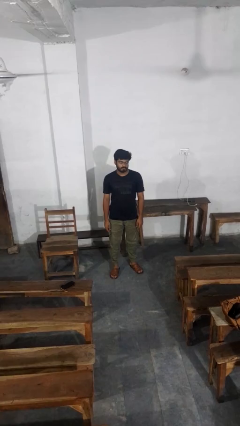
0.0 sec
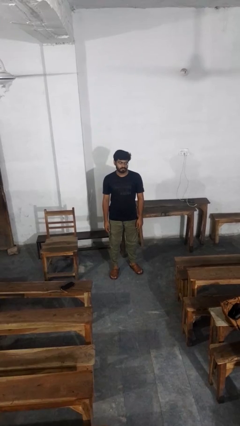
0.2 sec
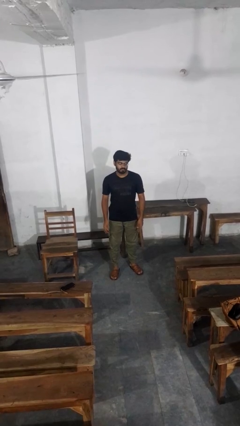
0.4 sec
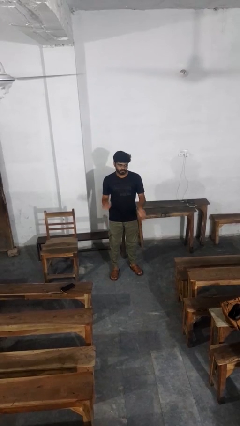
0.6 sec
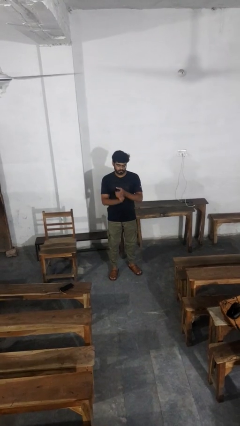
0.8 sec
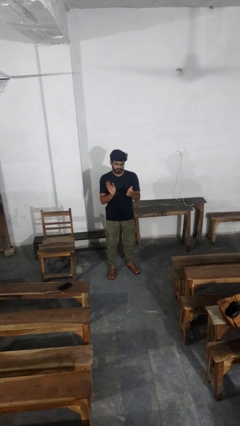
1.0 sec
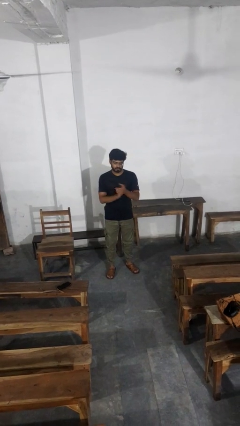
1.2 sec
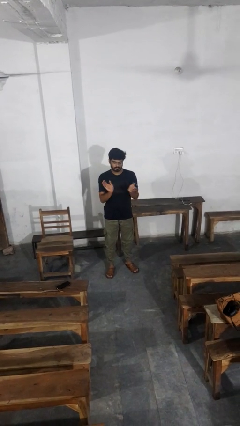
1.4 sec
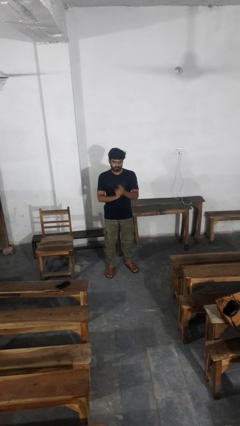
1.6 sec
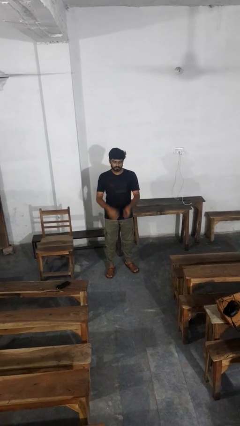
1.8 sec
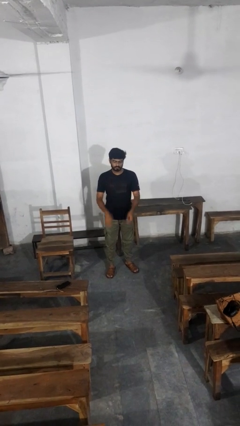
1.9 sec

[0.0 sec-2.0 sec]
person claps hands

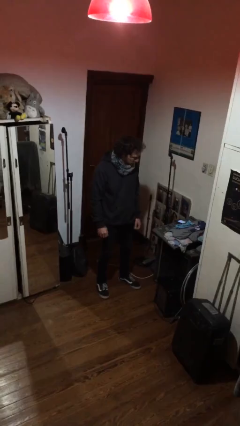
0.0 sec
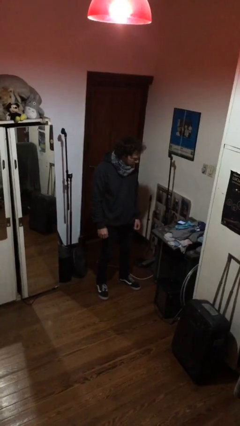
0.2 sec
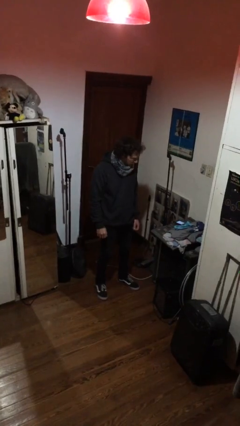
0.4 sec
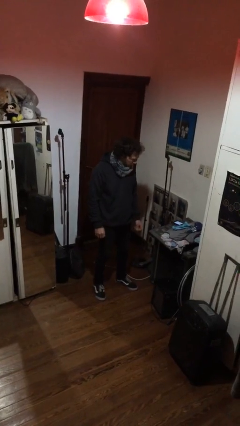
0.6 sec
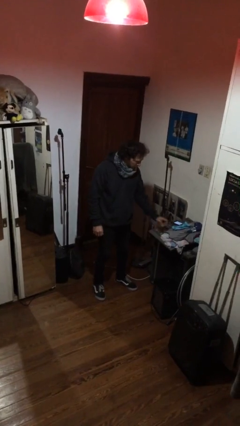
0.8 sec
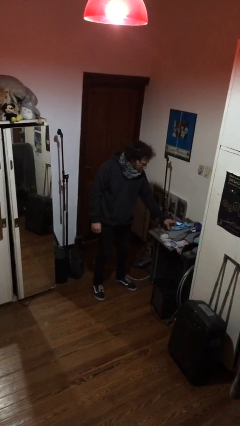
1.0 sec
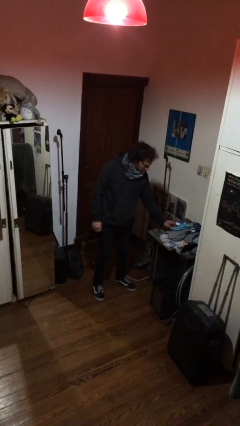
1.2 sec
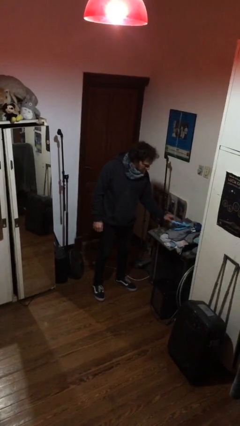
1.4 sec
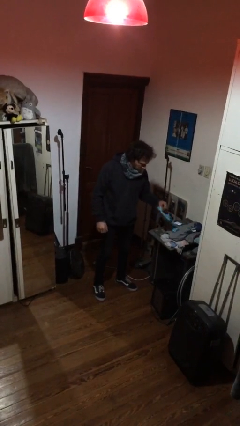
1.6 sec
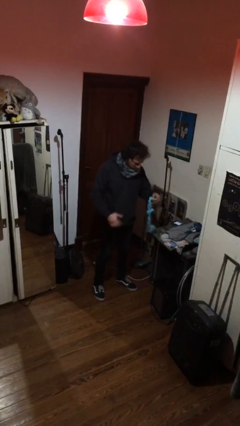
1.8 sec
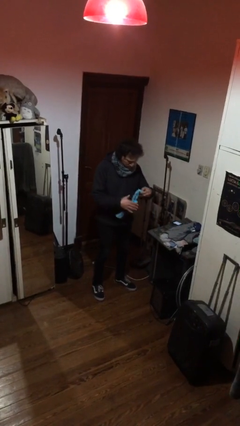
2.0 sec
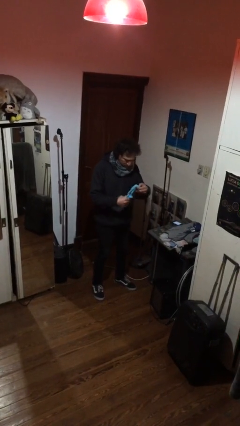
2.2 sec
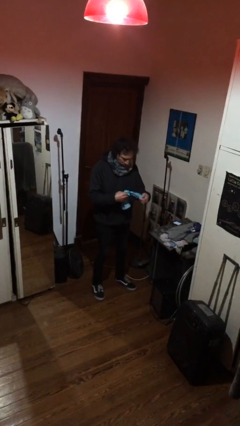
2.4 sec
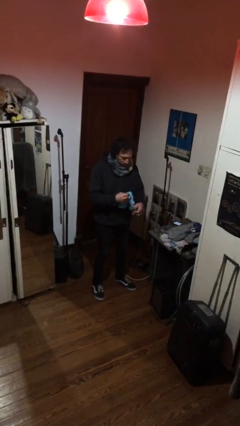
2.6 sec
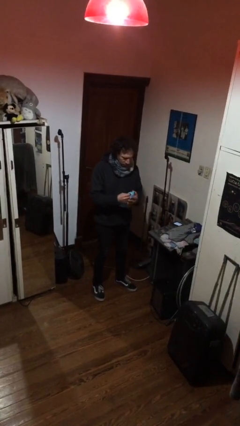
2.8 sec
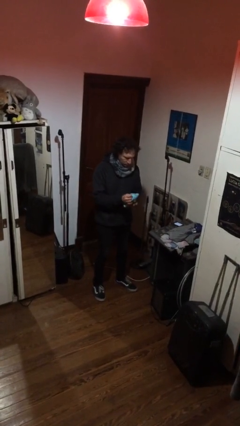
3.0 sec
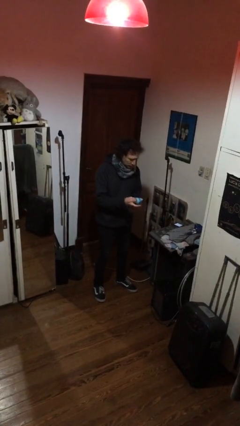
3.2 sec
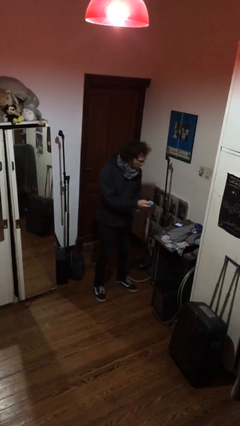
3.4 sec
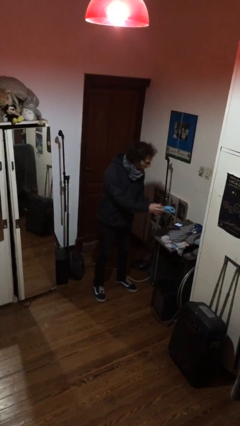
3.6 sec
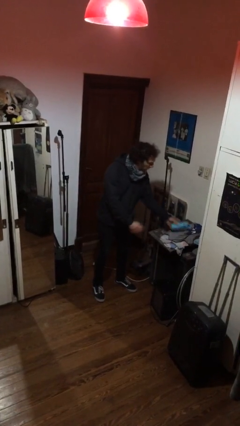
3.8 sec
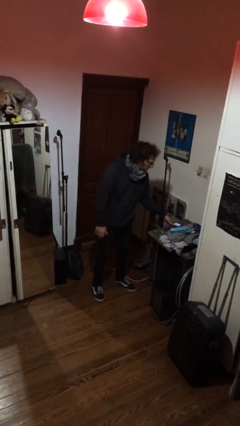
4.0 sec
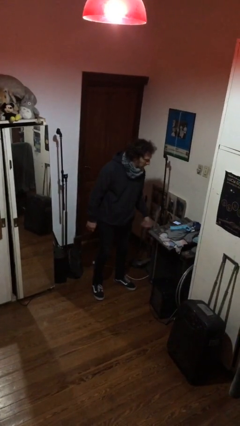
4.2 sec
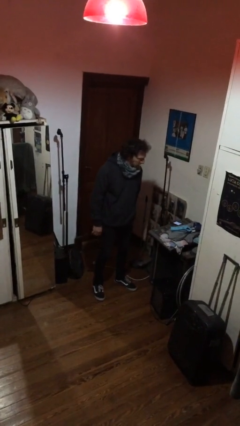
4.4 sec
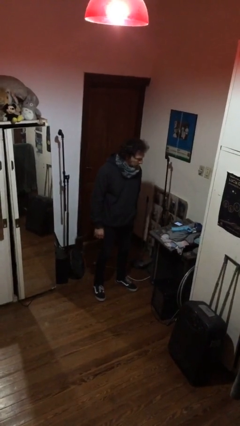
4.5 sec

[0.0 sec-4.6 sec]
person folds socks

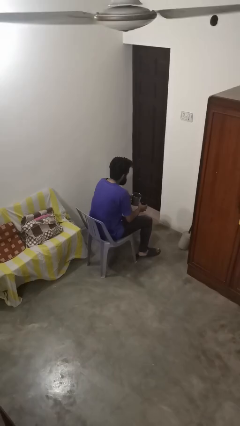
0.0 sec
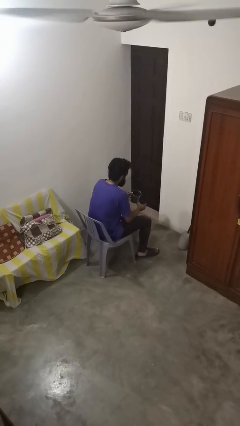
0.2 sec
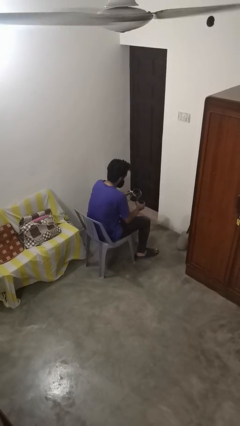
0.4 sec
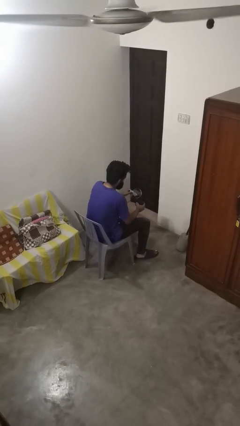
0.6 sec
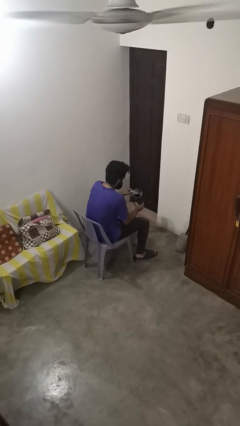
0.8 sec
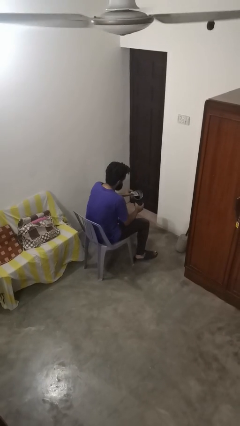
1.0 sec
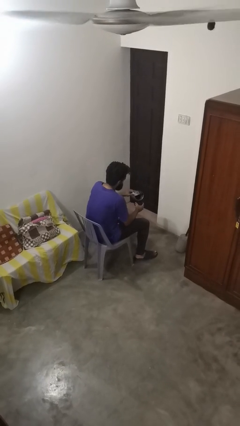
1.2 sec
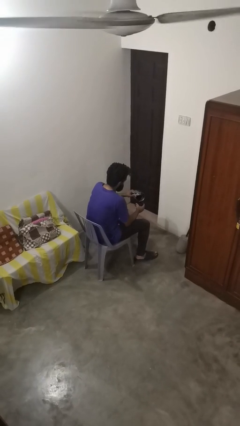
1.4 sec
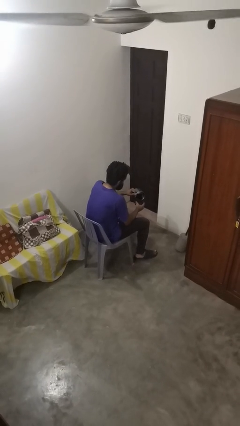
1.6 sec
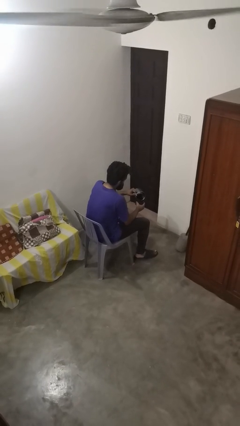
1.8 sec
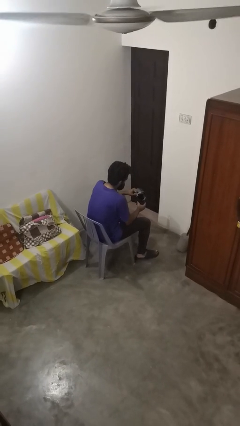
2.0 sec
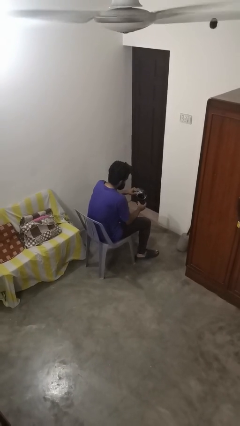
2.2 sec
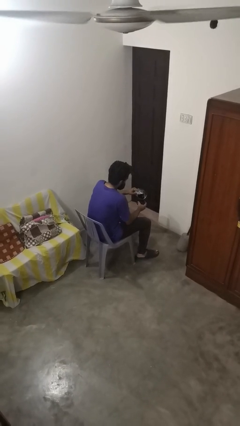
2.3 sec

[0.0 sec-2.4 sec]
person pours coffee into mug

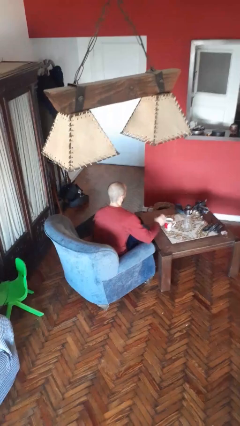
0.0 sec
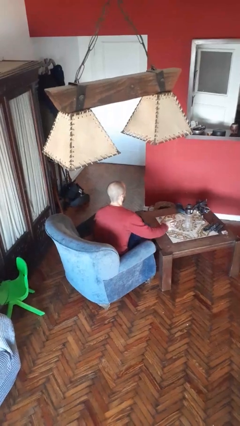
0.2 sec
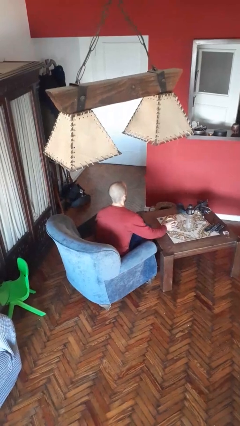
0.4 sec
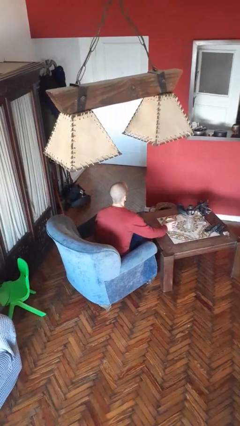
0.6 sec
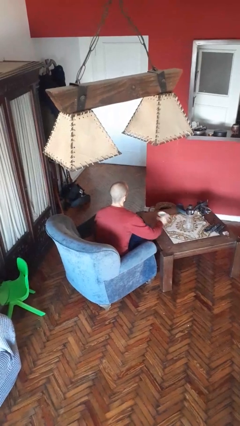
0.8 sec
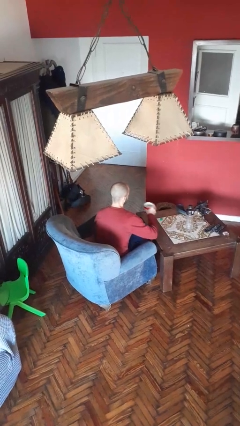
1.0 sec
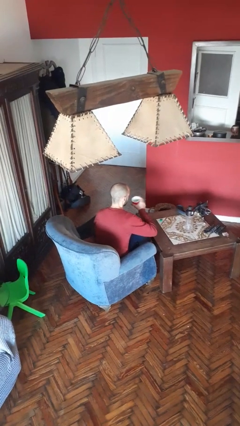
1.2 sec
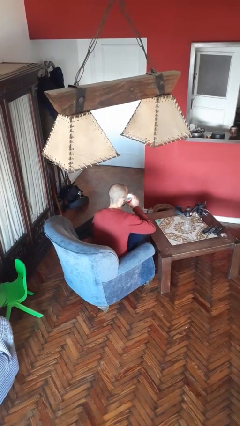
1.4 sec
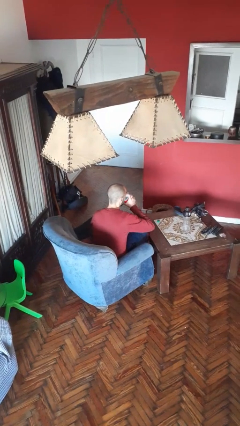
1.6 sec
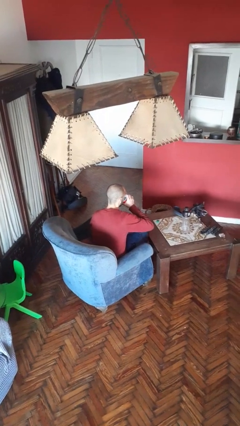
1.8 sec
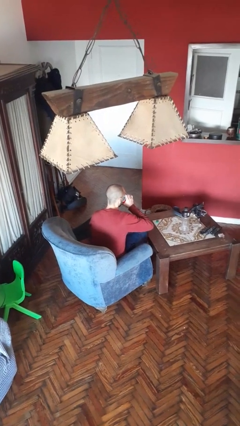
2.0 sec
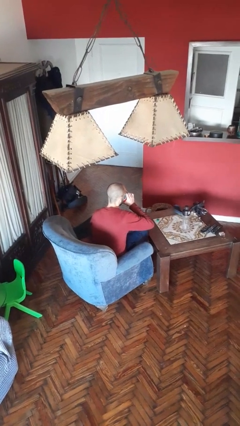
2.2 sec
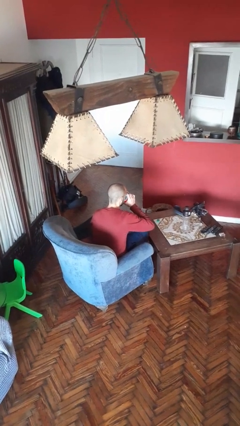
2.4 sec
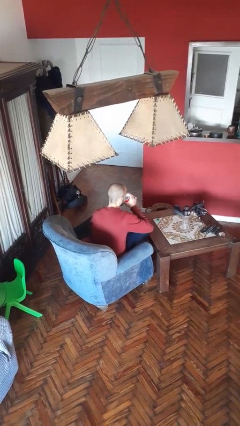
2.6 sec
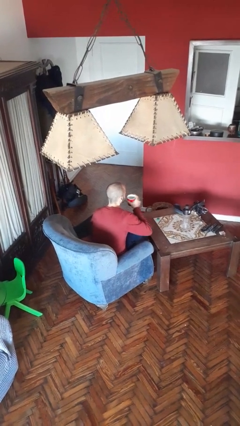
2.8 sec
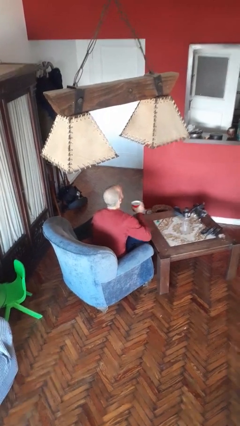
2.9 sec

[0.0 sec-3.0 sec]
person drinks from cup

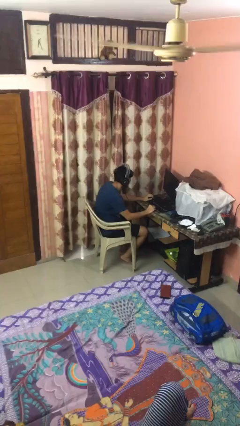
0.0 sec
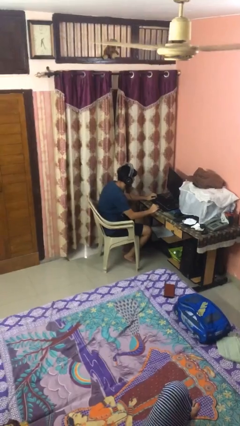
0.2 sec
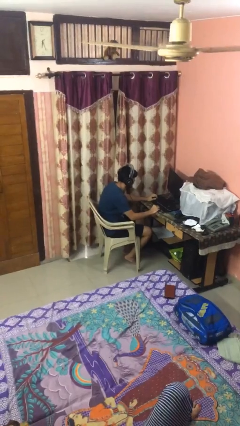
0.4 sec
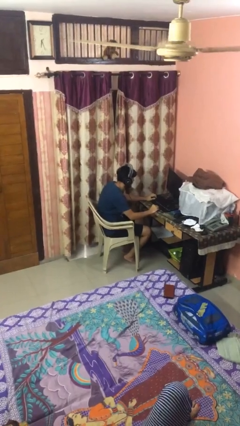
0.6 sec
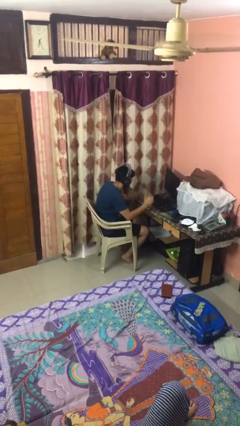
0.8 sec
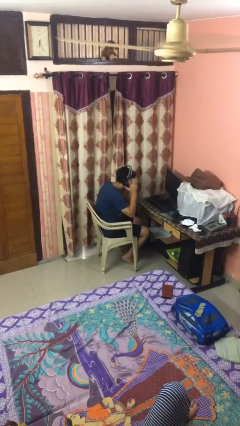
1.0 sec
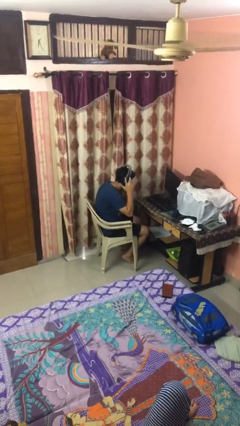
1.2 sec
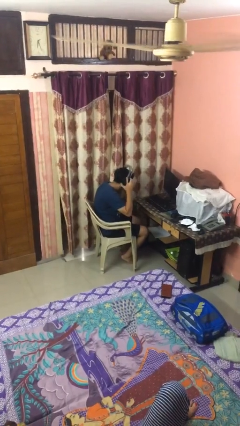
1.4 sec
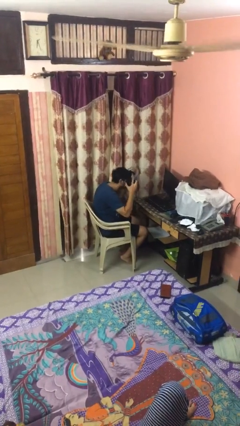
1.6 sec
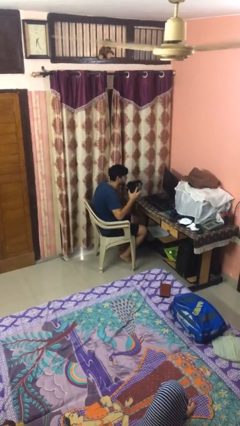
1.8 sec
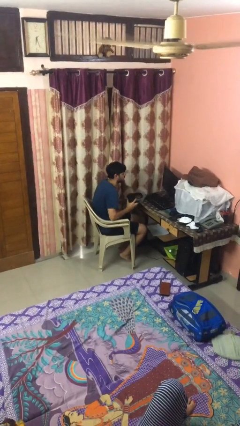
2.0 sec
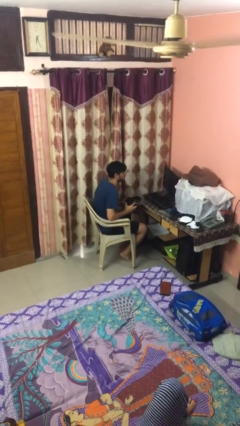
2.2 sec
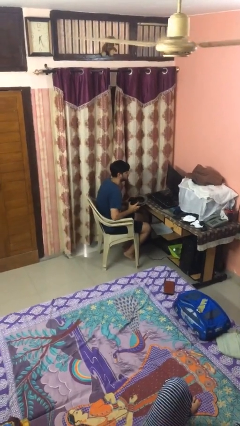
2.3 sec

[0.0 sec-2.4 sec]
person takes off headphones

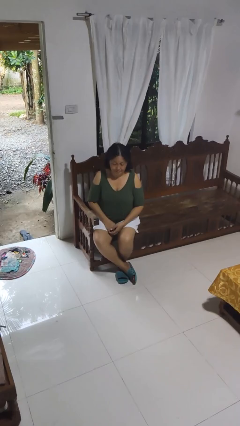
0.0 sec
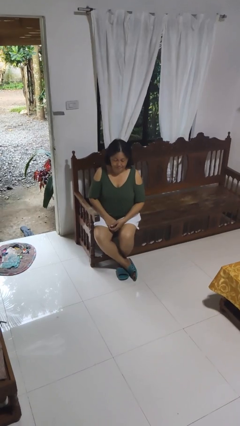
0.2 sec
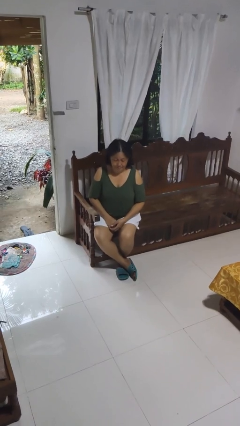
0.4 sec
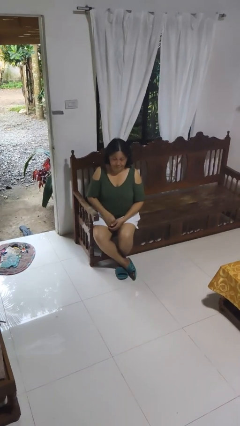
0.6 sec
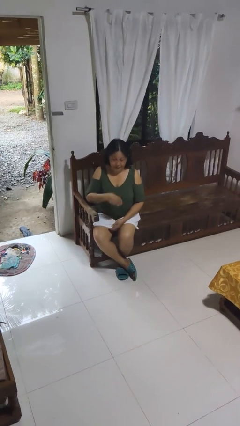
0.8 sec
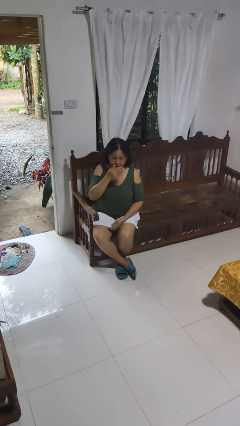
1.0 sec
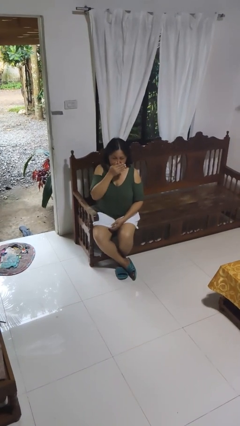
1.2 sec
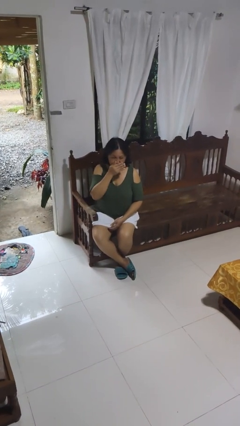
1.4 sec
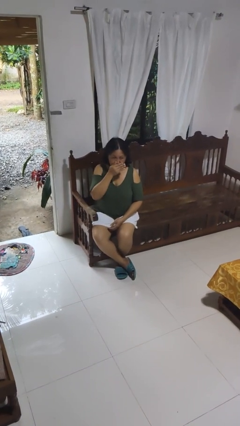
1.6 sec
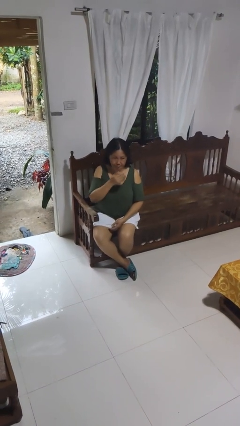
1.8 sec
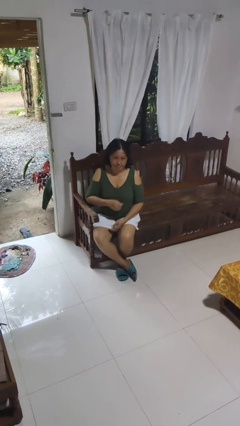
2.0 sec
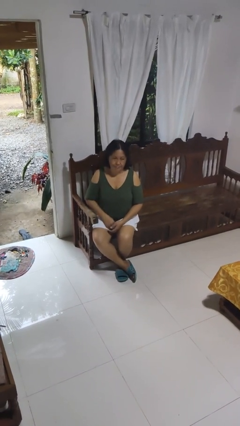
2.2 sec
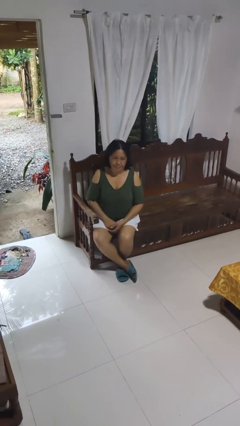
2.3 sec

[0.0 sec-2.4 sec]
person sneezes into hand

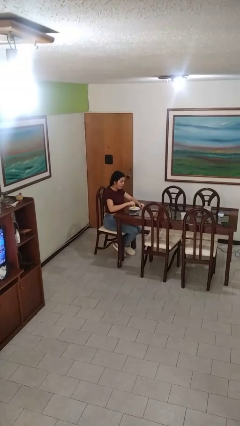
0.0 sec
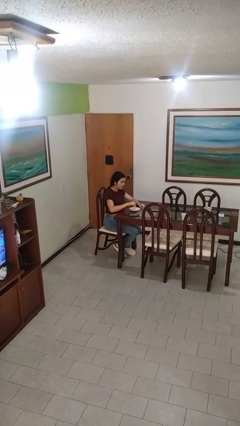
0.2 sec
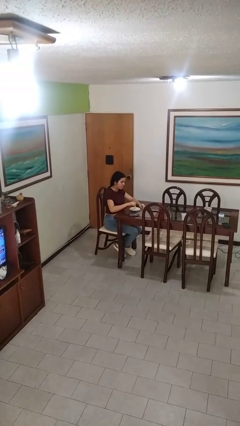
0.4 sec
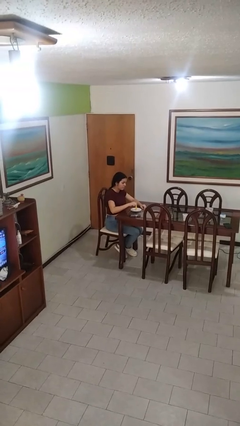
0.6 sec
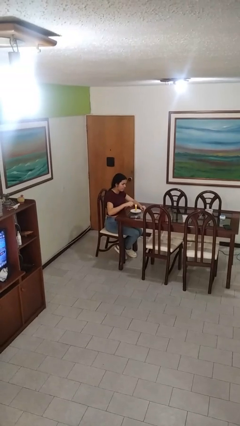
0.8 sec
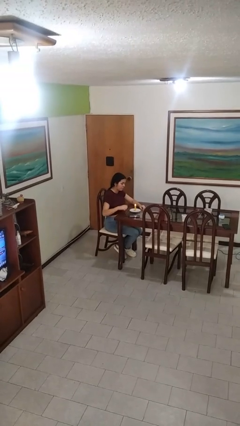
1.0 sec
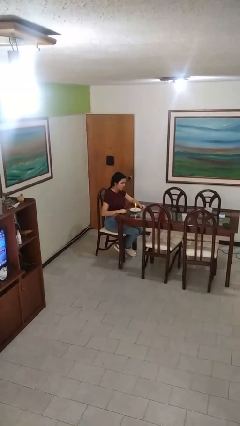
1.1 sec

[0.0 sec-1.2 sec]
person lights candle
